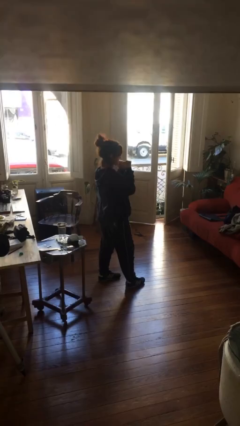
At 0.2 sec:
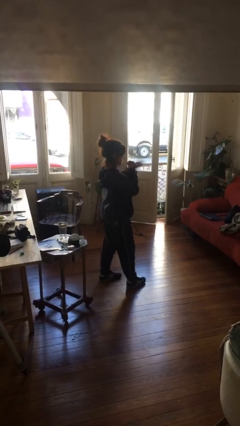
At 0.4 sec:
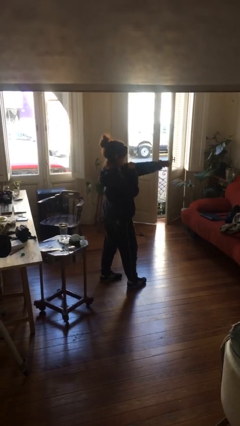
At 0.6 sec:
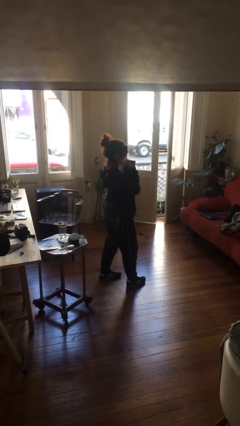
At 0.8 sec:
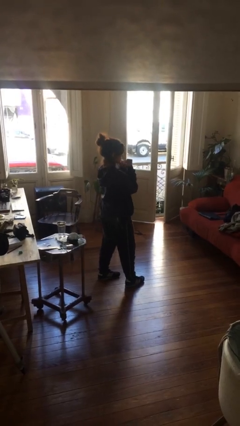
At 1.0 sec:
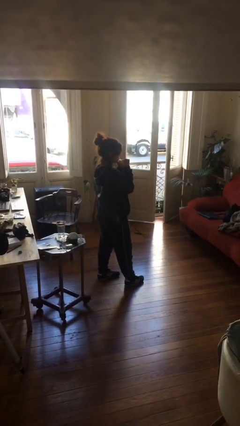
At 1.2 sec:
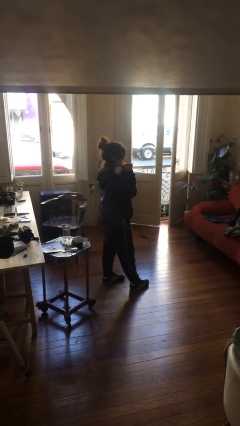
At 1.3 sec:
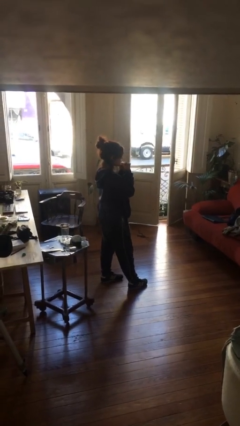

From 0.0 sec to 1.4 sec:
person punches

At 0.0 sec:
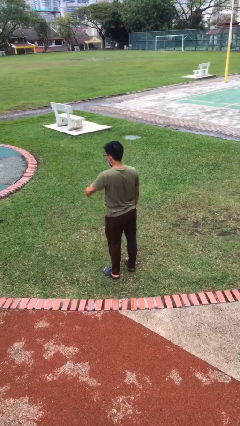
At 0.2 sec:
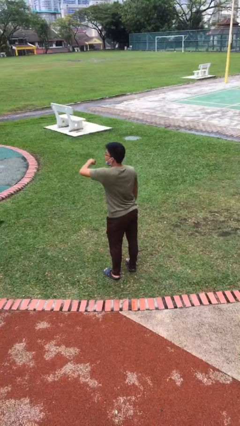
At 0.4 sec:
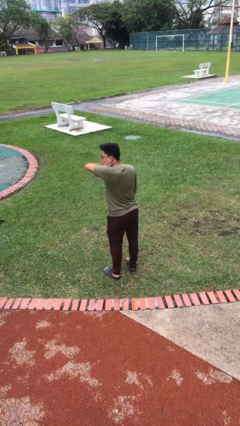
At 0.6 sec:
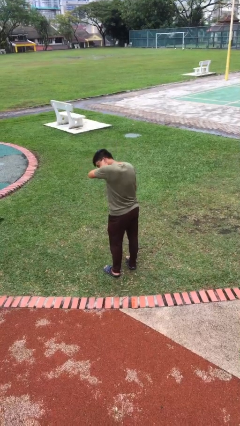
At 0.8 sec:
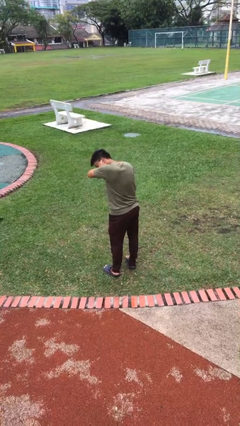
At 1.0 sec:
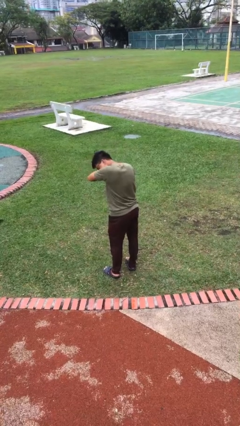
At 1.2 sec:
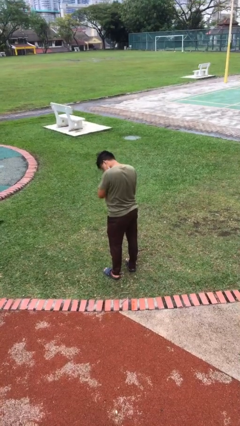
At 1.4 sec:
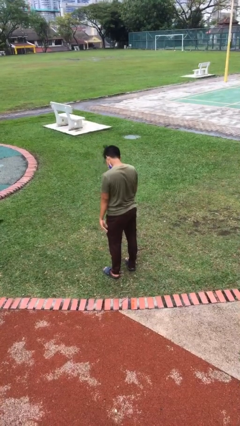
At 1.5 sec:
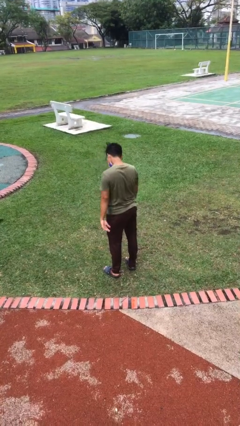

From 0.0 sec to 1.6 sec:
person sneezes into arm

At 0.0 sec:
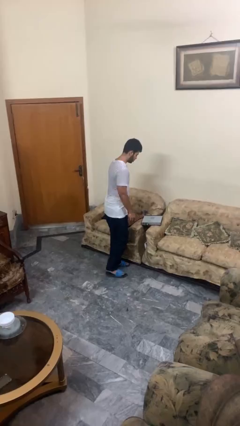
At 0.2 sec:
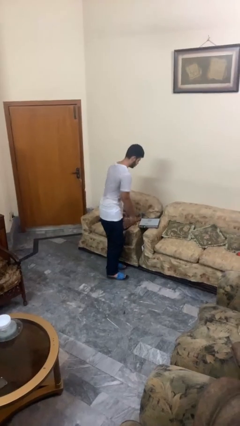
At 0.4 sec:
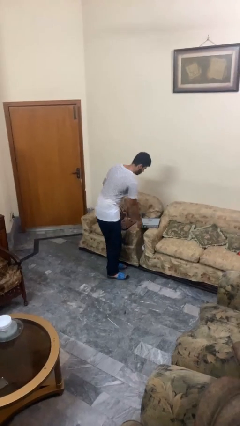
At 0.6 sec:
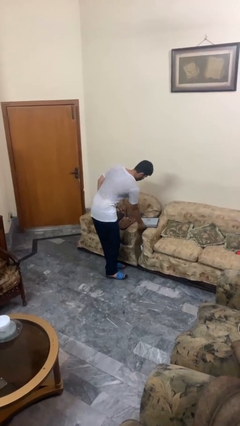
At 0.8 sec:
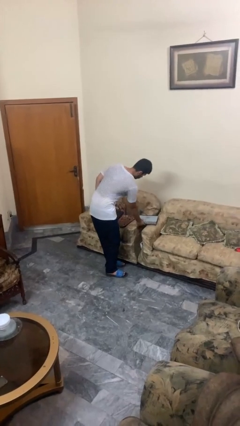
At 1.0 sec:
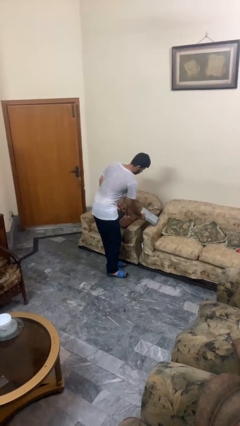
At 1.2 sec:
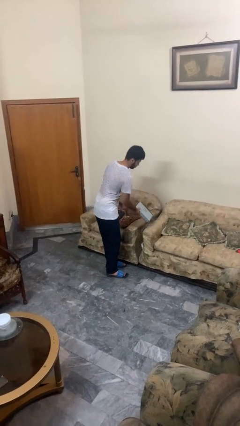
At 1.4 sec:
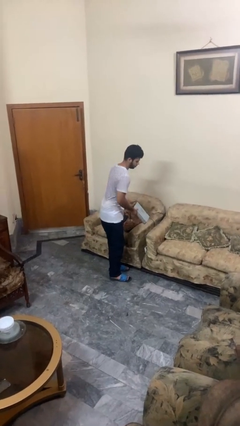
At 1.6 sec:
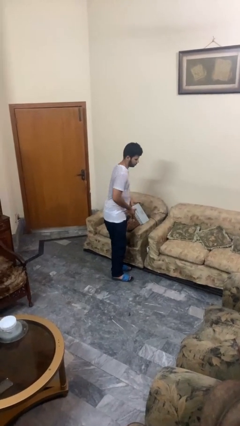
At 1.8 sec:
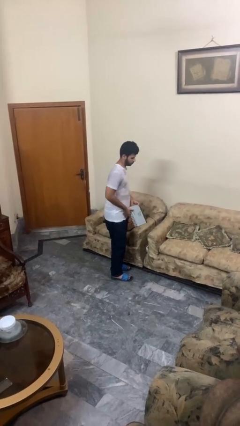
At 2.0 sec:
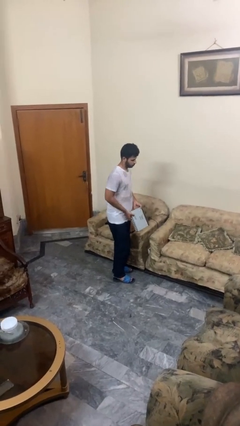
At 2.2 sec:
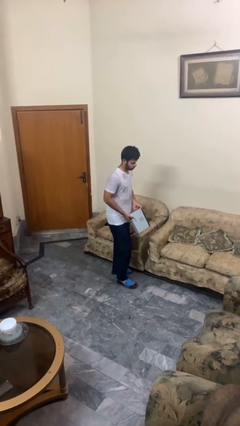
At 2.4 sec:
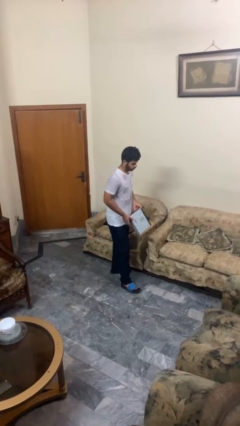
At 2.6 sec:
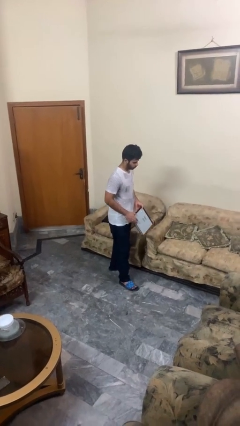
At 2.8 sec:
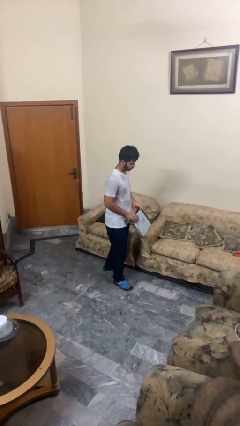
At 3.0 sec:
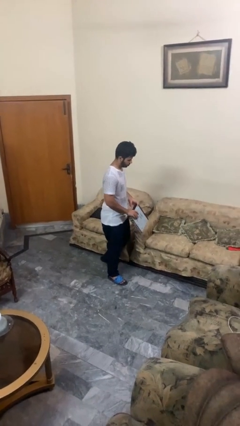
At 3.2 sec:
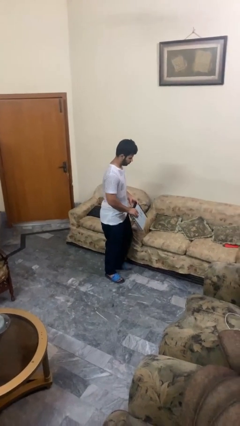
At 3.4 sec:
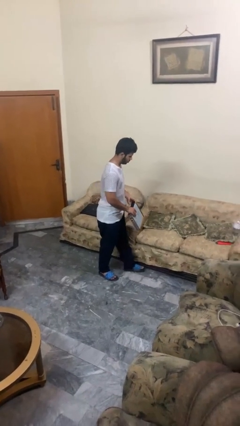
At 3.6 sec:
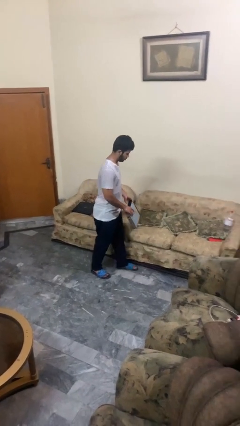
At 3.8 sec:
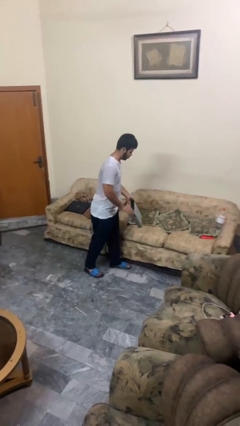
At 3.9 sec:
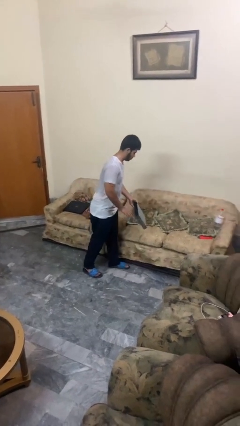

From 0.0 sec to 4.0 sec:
person picks up object from couch

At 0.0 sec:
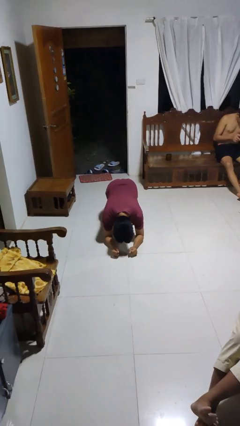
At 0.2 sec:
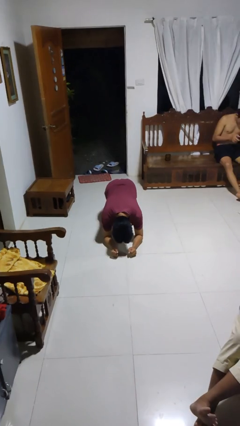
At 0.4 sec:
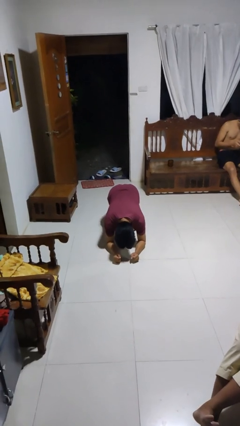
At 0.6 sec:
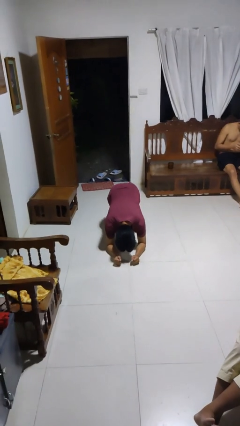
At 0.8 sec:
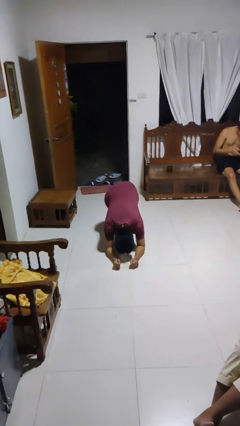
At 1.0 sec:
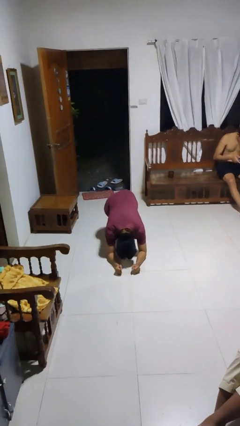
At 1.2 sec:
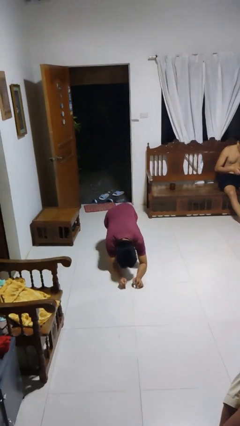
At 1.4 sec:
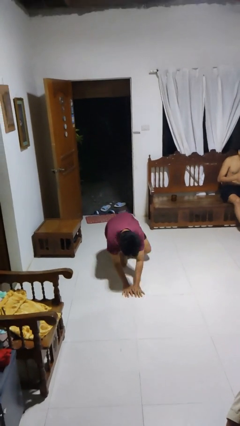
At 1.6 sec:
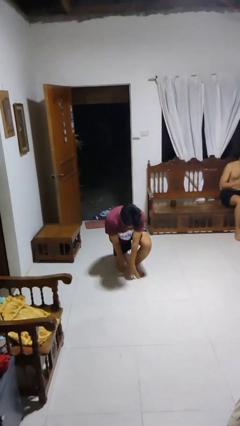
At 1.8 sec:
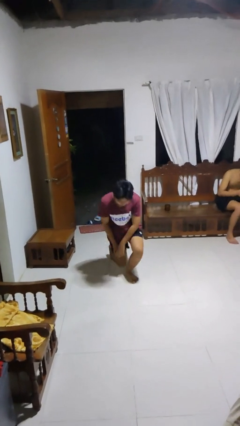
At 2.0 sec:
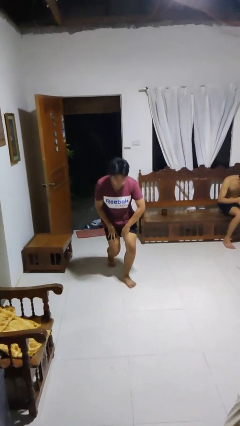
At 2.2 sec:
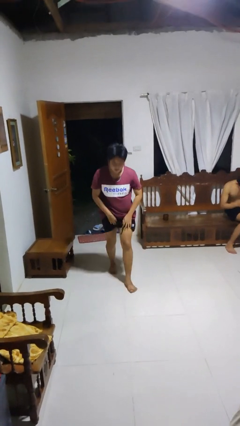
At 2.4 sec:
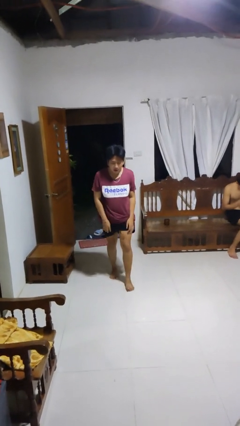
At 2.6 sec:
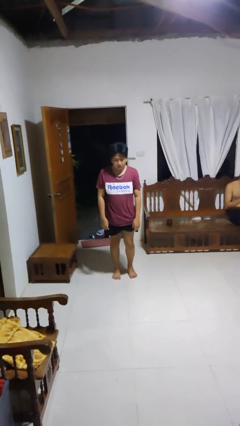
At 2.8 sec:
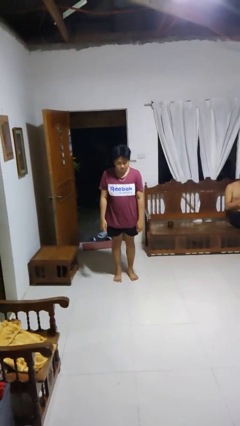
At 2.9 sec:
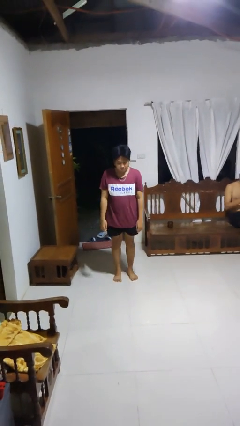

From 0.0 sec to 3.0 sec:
person stands up from floor

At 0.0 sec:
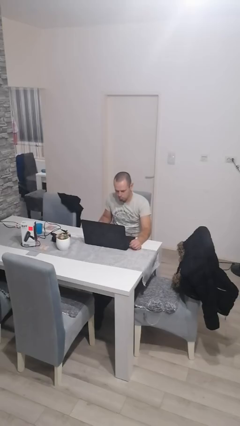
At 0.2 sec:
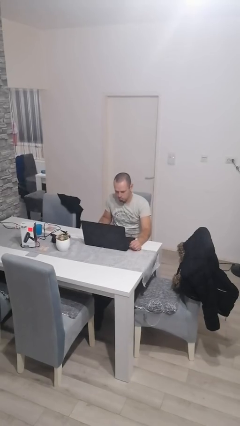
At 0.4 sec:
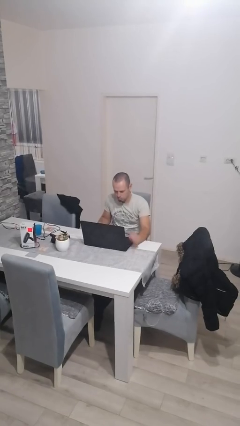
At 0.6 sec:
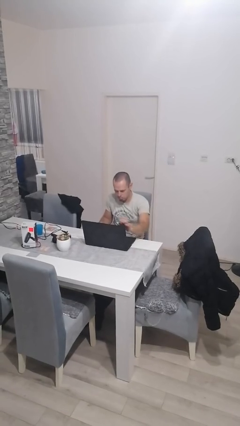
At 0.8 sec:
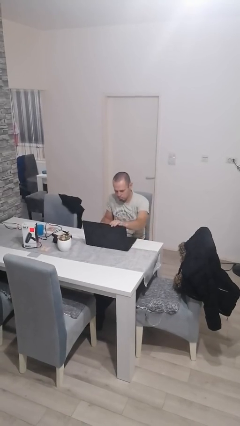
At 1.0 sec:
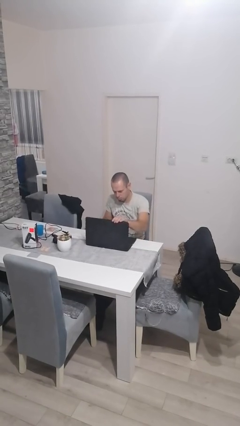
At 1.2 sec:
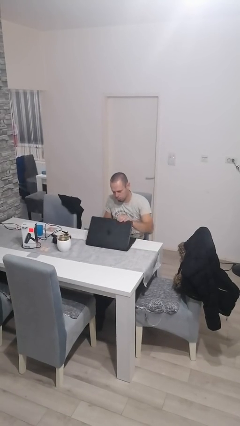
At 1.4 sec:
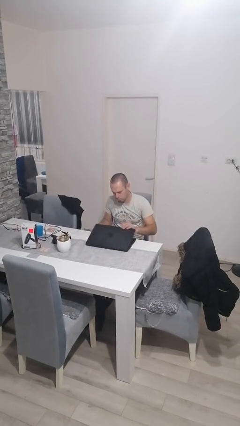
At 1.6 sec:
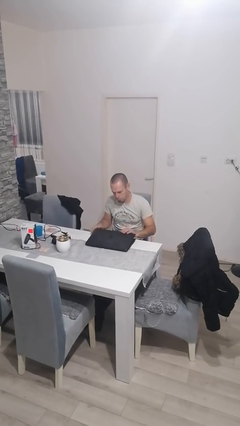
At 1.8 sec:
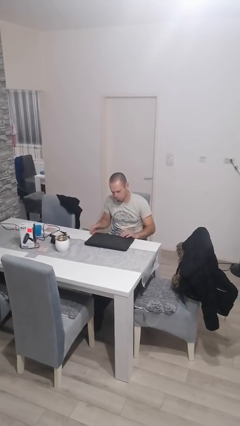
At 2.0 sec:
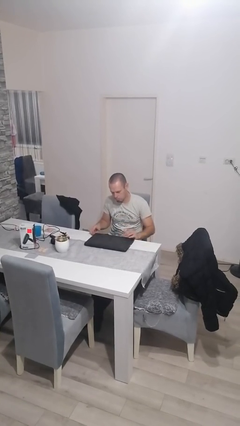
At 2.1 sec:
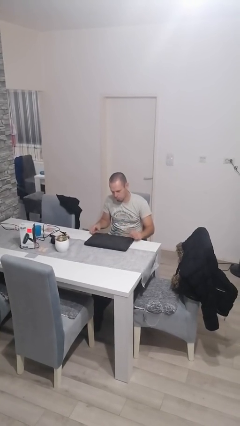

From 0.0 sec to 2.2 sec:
person closes laptop

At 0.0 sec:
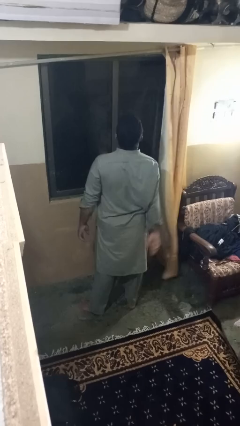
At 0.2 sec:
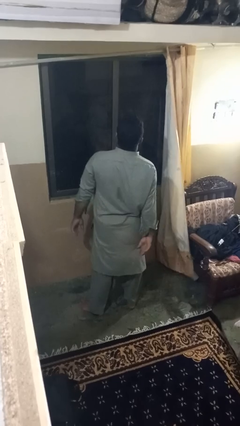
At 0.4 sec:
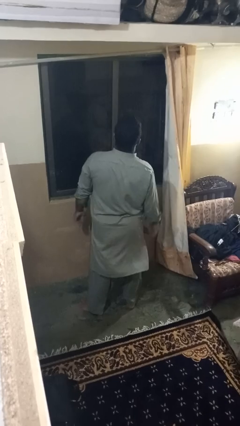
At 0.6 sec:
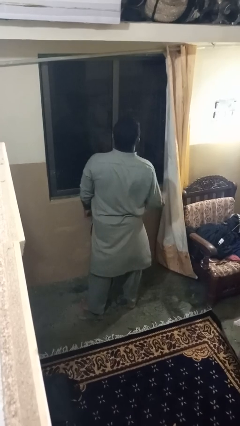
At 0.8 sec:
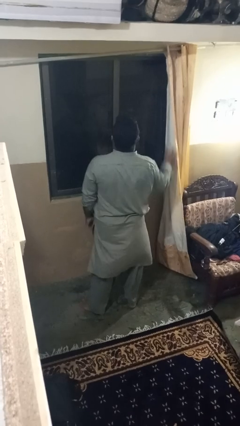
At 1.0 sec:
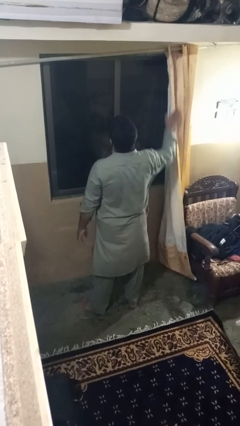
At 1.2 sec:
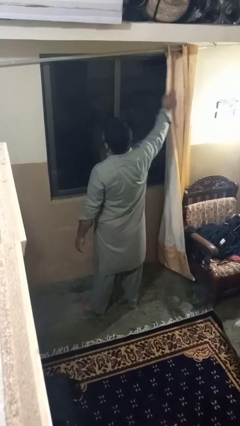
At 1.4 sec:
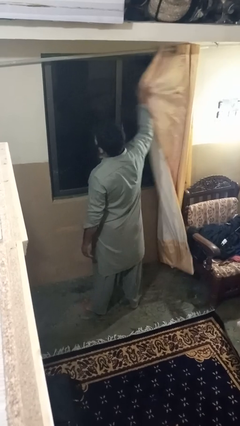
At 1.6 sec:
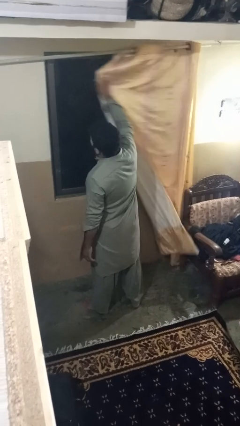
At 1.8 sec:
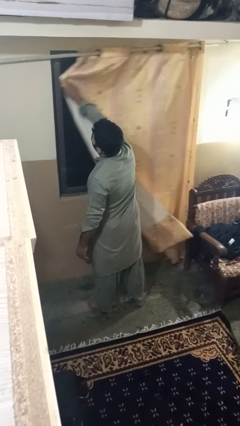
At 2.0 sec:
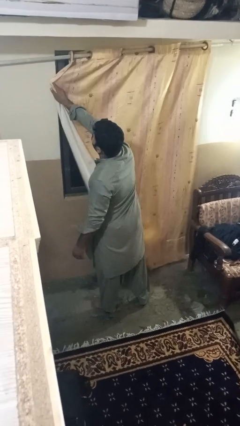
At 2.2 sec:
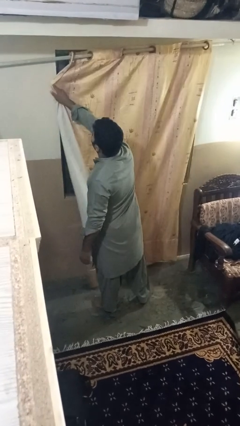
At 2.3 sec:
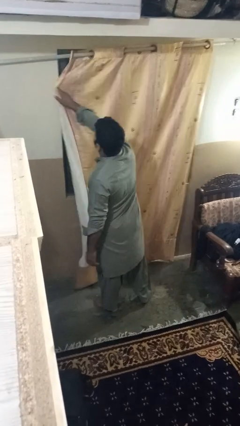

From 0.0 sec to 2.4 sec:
person closes curtains

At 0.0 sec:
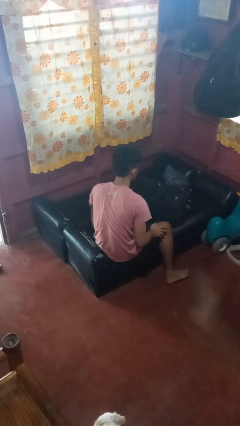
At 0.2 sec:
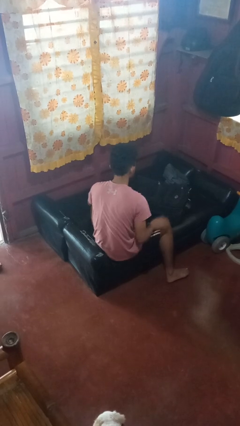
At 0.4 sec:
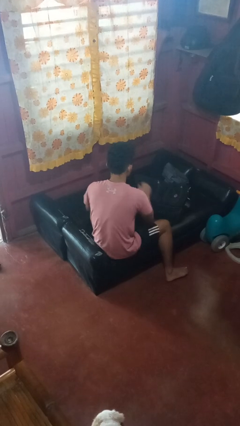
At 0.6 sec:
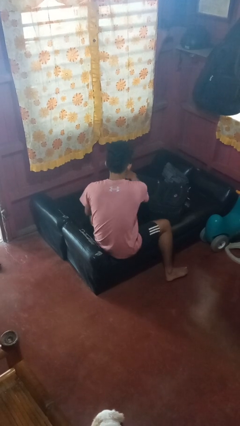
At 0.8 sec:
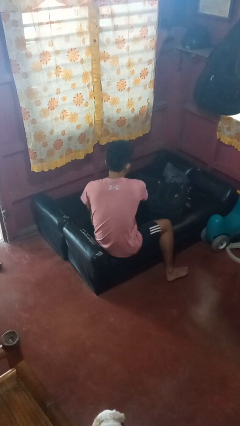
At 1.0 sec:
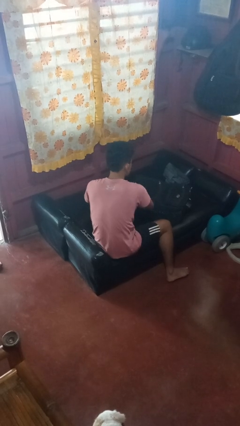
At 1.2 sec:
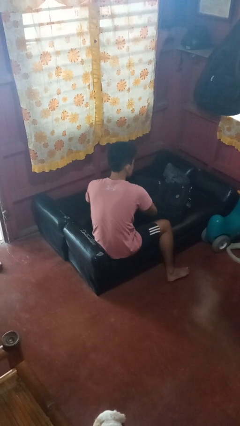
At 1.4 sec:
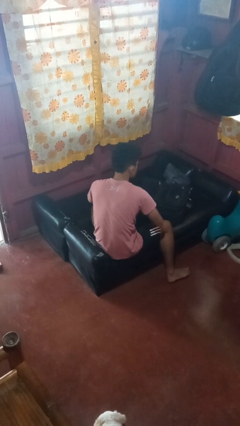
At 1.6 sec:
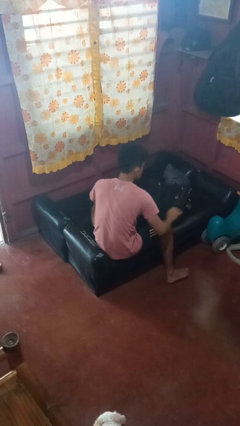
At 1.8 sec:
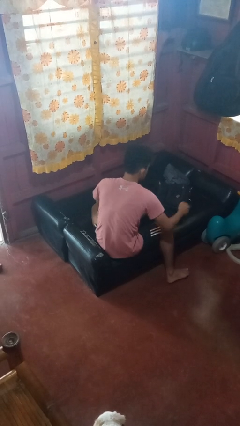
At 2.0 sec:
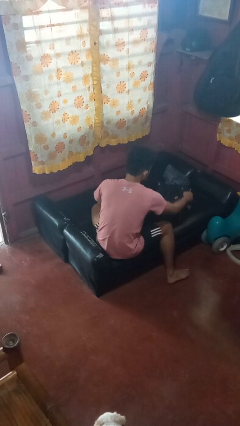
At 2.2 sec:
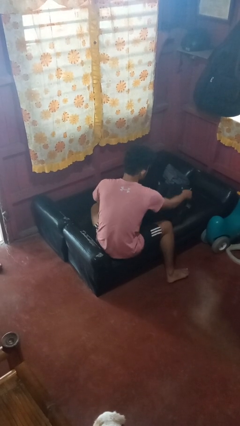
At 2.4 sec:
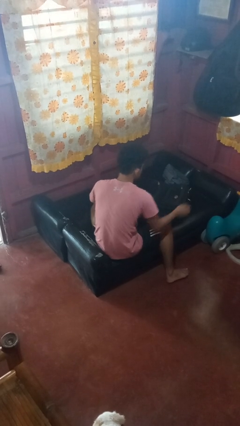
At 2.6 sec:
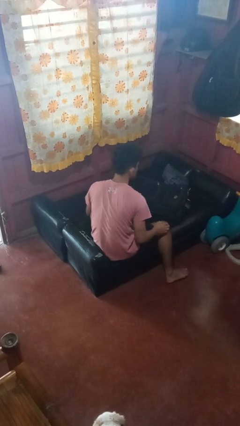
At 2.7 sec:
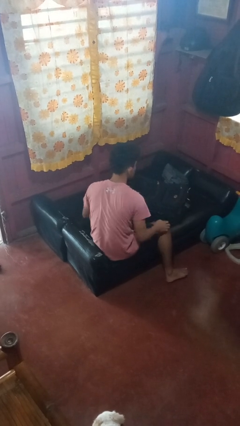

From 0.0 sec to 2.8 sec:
person closes suitcase
